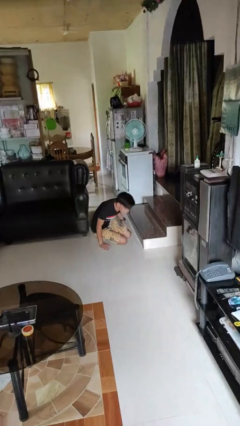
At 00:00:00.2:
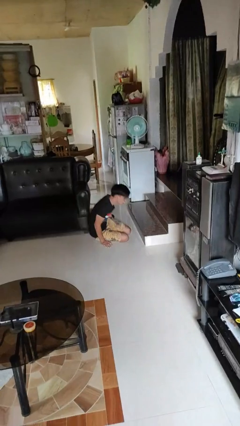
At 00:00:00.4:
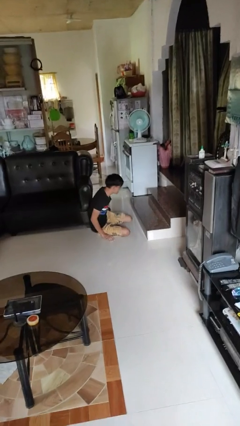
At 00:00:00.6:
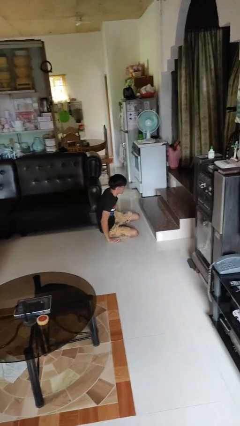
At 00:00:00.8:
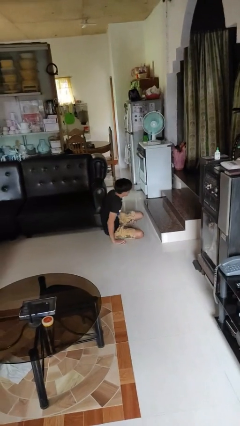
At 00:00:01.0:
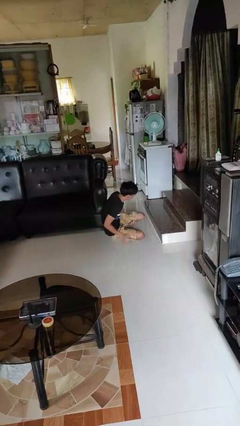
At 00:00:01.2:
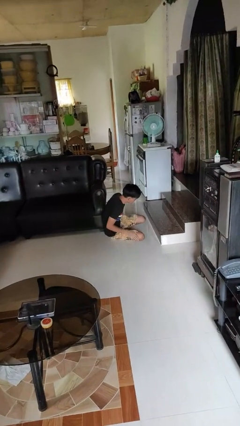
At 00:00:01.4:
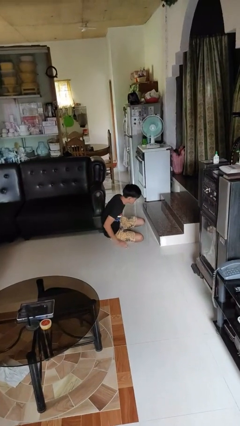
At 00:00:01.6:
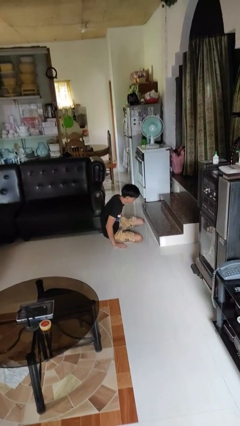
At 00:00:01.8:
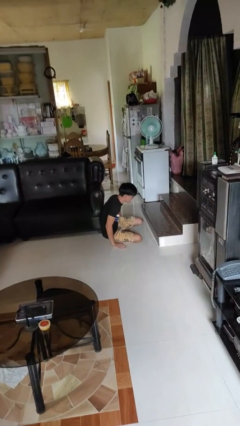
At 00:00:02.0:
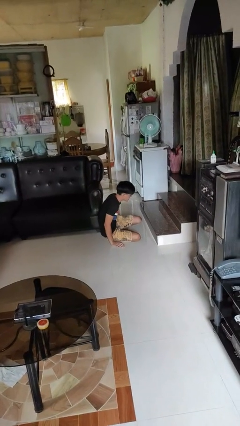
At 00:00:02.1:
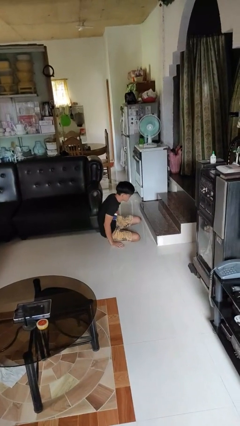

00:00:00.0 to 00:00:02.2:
person lies down on floor

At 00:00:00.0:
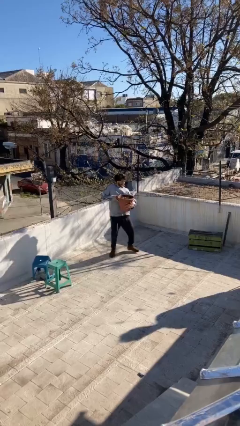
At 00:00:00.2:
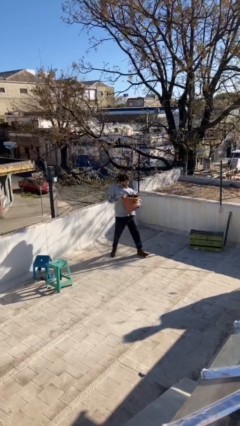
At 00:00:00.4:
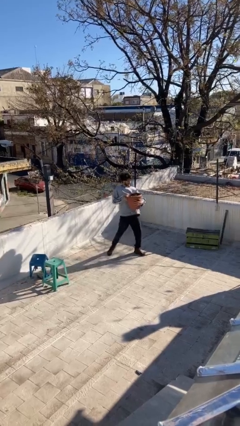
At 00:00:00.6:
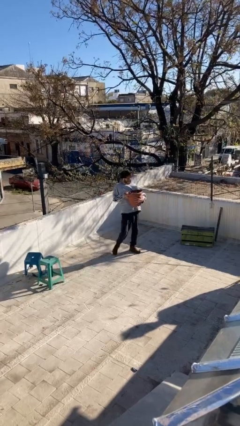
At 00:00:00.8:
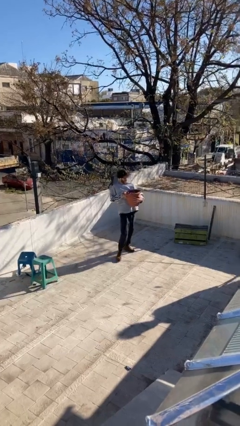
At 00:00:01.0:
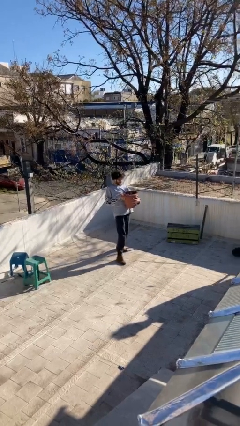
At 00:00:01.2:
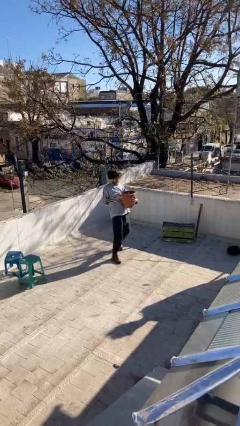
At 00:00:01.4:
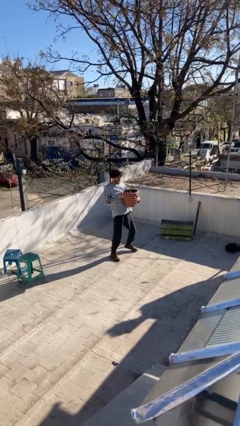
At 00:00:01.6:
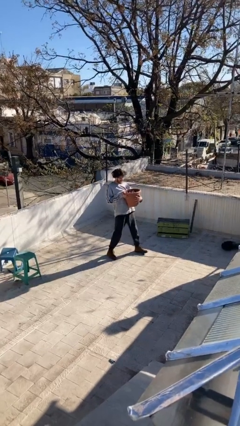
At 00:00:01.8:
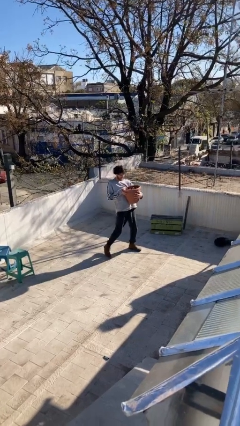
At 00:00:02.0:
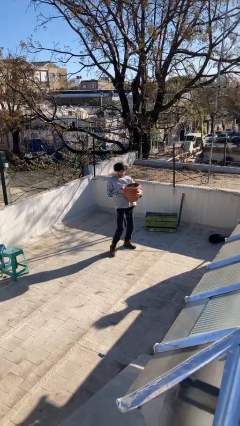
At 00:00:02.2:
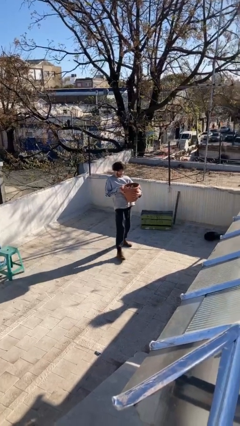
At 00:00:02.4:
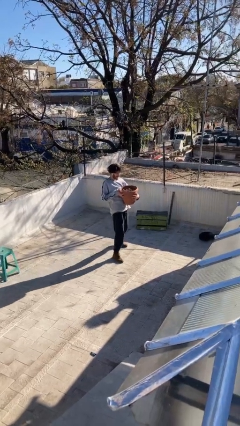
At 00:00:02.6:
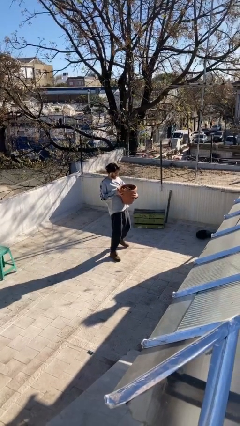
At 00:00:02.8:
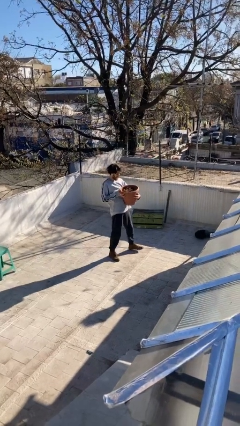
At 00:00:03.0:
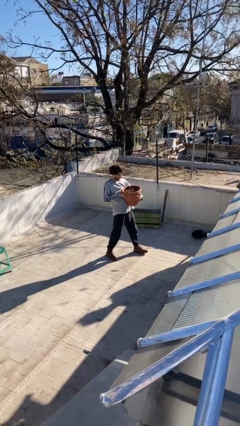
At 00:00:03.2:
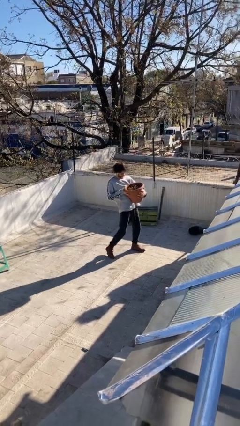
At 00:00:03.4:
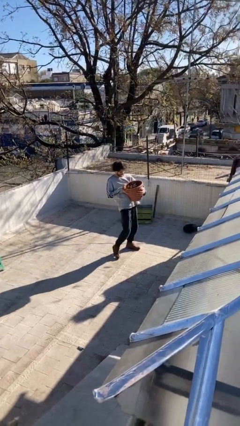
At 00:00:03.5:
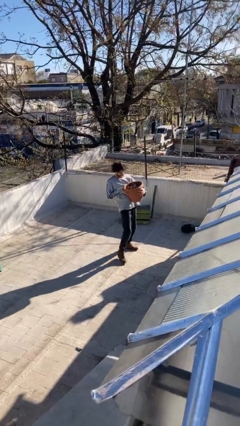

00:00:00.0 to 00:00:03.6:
person carries heavy object

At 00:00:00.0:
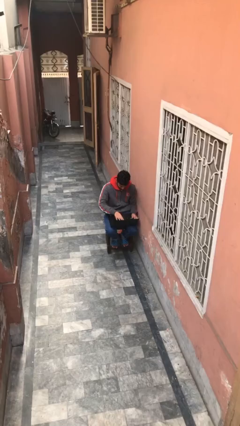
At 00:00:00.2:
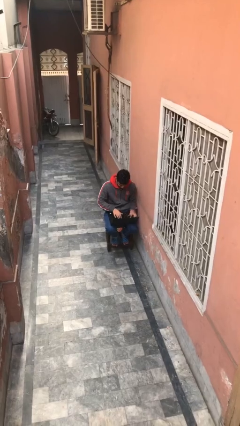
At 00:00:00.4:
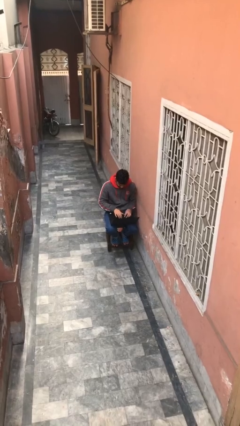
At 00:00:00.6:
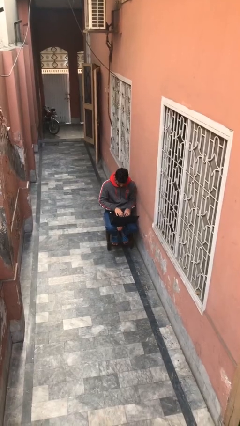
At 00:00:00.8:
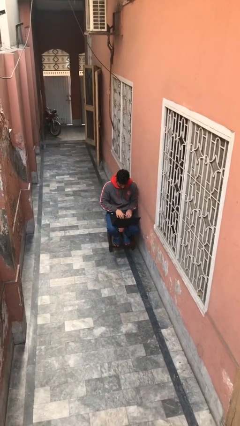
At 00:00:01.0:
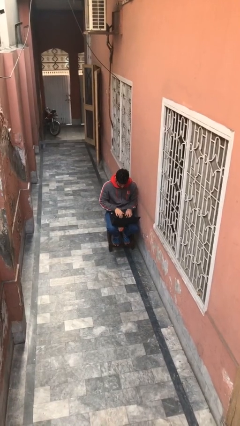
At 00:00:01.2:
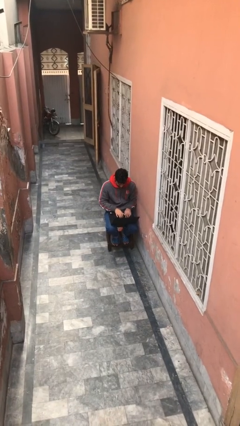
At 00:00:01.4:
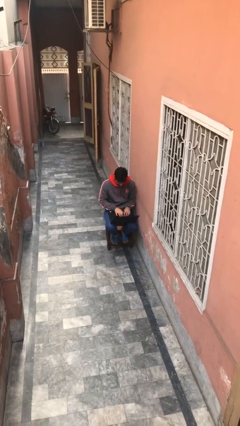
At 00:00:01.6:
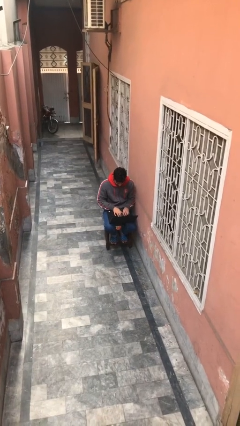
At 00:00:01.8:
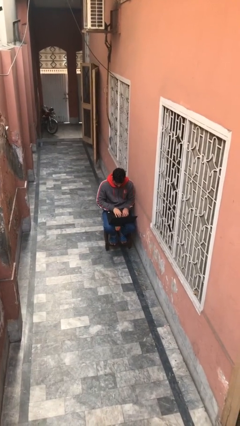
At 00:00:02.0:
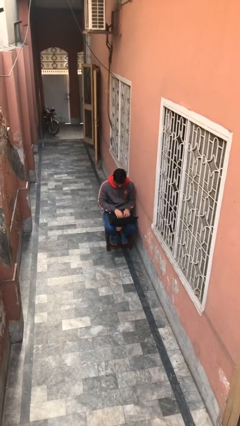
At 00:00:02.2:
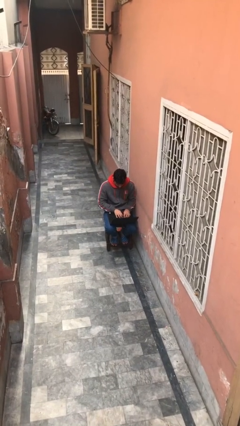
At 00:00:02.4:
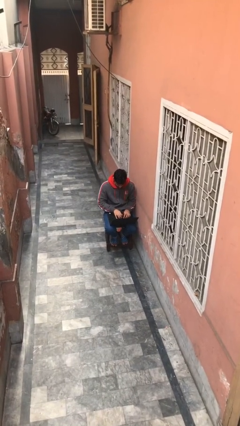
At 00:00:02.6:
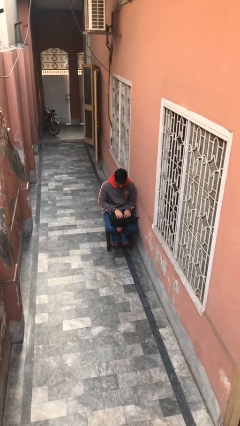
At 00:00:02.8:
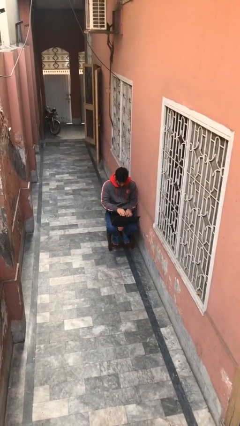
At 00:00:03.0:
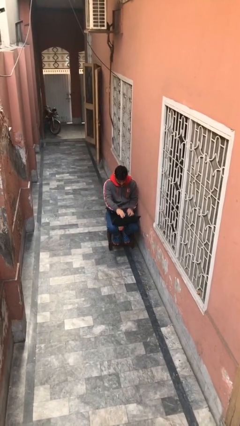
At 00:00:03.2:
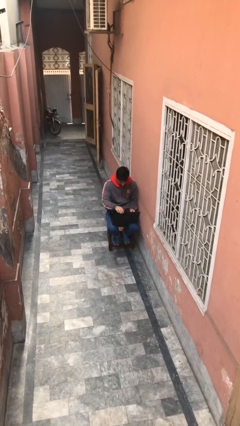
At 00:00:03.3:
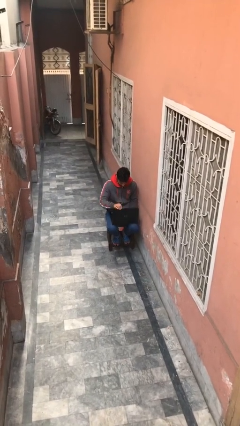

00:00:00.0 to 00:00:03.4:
person interacts with laptop

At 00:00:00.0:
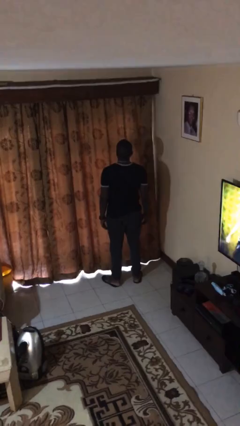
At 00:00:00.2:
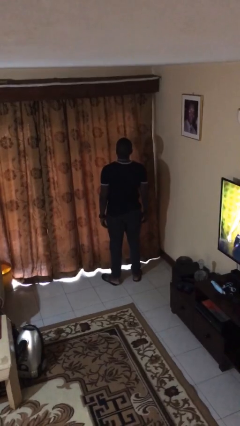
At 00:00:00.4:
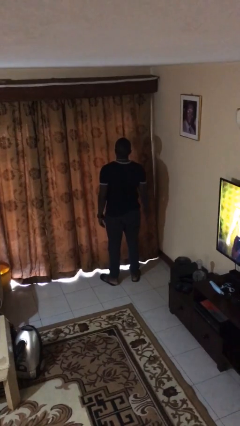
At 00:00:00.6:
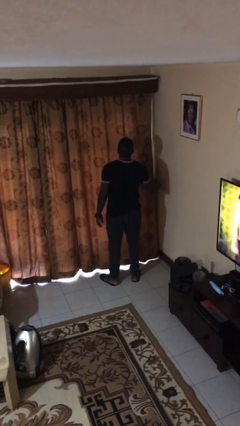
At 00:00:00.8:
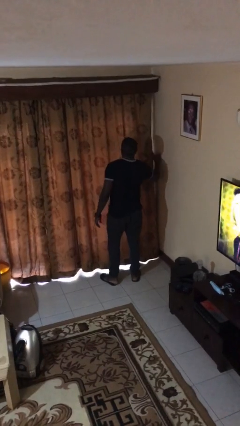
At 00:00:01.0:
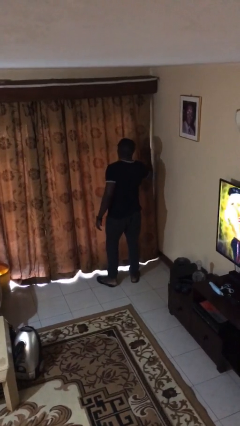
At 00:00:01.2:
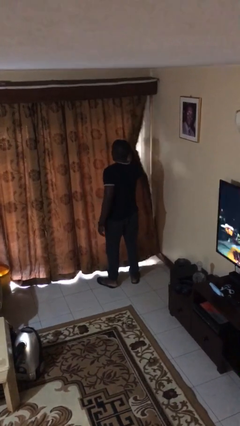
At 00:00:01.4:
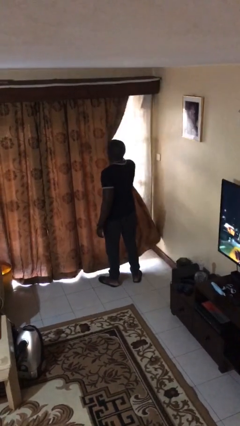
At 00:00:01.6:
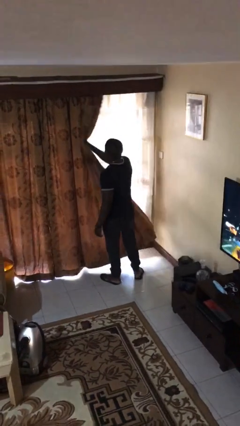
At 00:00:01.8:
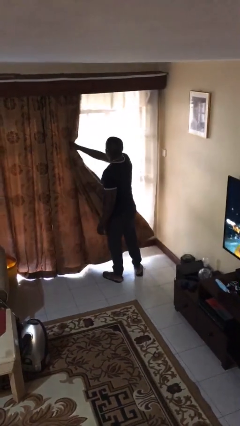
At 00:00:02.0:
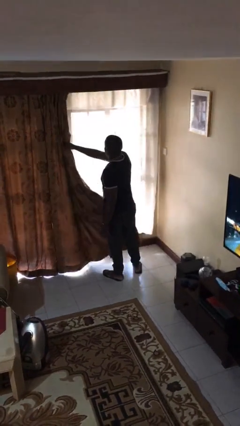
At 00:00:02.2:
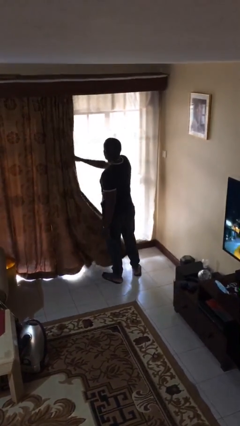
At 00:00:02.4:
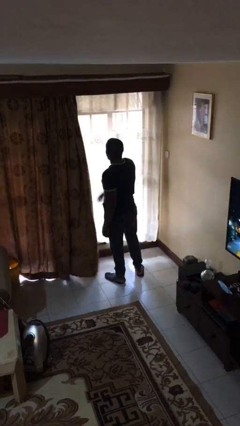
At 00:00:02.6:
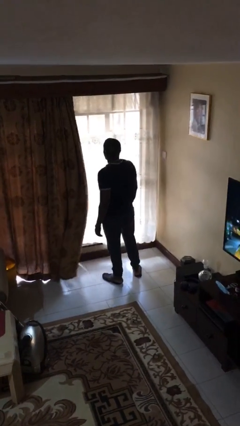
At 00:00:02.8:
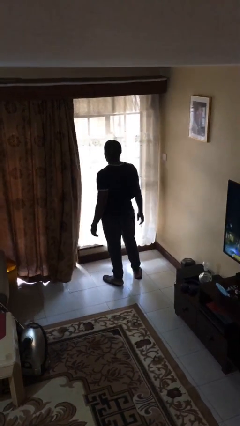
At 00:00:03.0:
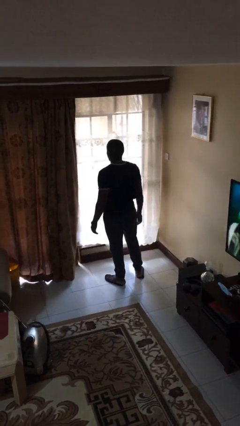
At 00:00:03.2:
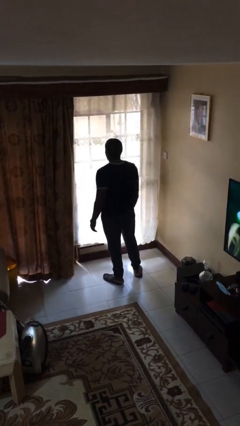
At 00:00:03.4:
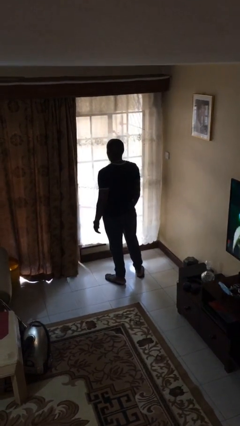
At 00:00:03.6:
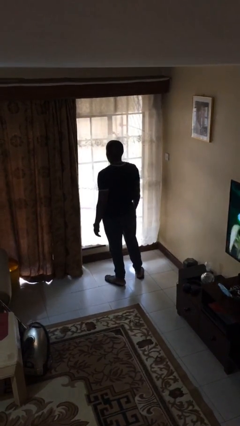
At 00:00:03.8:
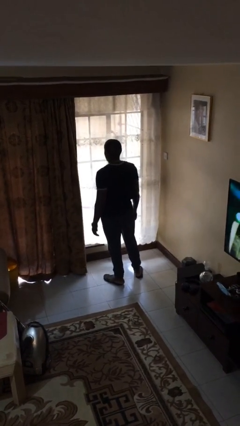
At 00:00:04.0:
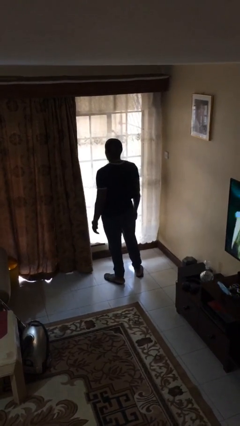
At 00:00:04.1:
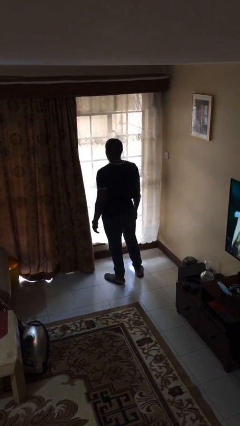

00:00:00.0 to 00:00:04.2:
person opens curtains

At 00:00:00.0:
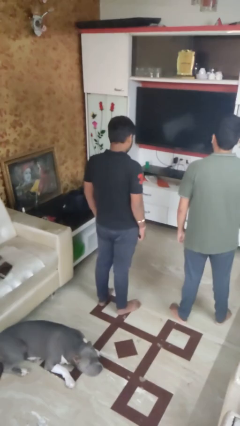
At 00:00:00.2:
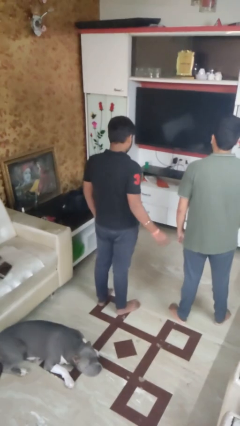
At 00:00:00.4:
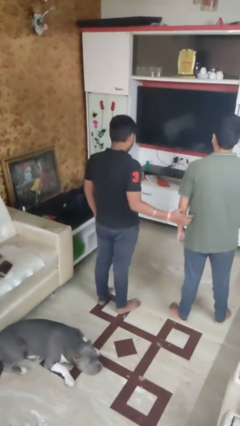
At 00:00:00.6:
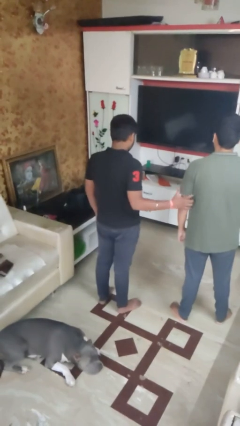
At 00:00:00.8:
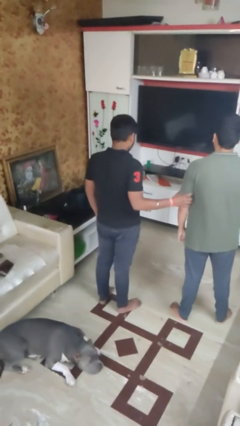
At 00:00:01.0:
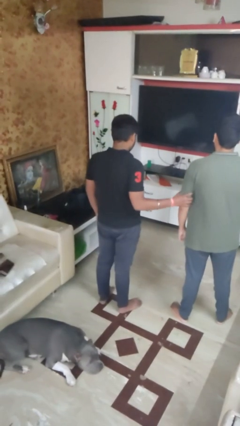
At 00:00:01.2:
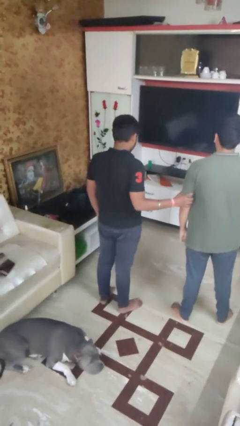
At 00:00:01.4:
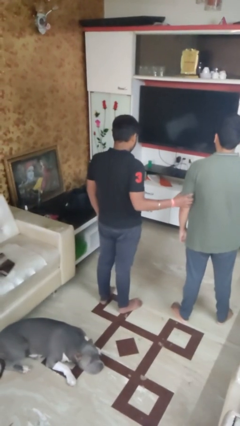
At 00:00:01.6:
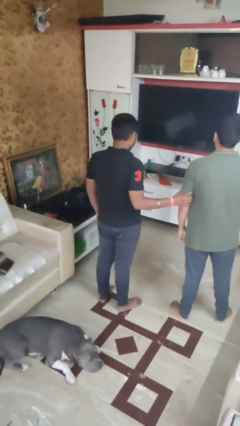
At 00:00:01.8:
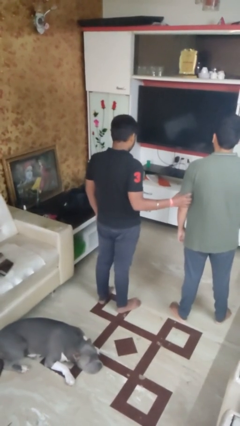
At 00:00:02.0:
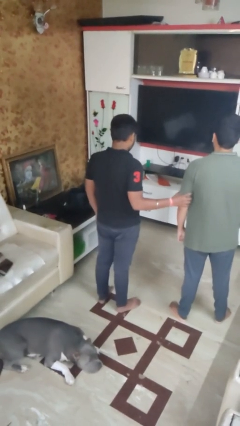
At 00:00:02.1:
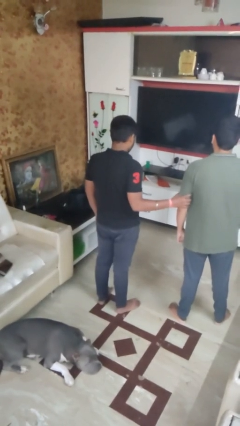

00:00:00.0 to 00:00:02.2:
person grabs person by bicep

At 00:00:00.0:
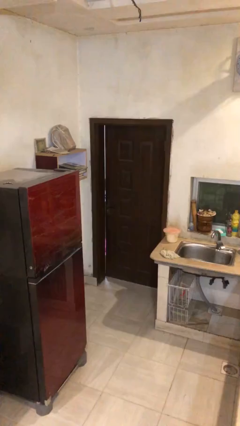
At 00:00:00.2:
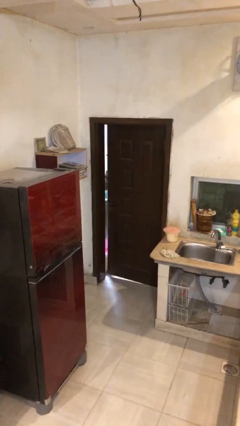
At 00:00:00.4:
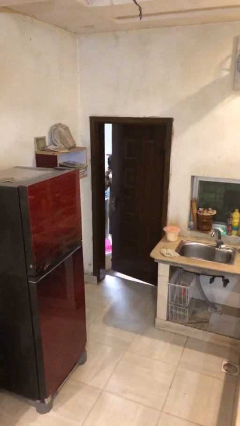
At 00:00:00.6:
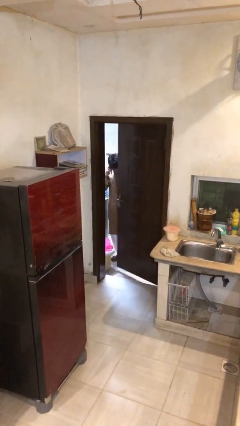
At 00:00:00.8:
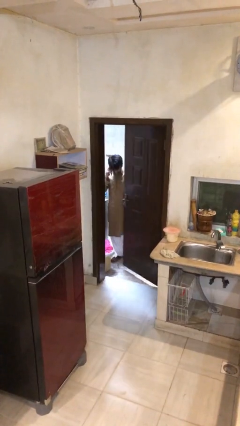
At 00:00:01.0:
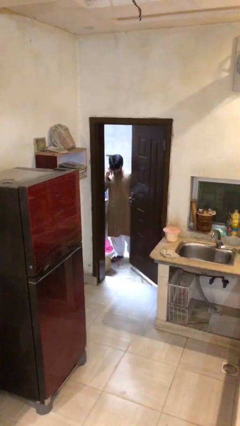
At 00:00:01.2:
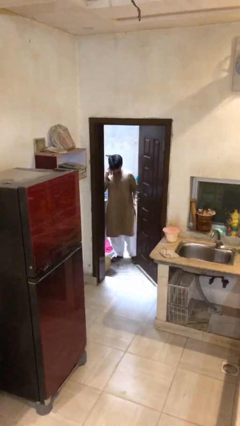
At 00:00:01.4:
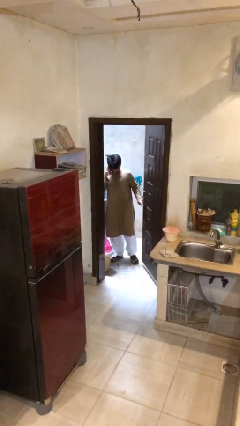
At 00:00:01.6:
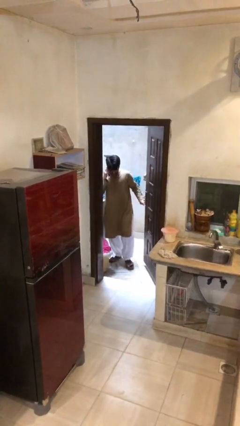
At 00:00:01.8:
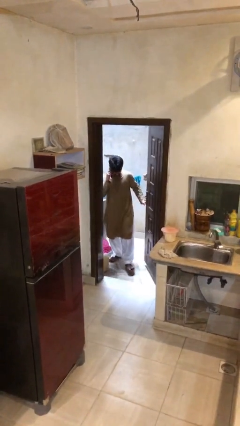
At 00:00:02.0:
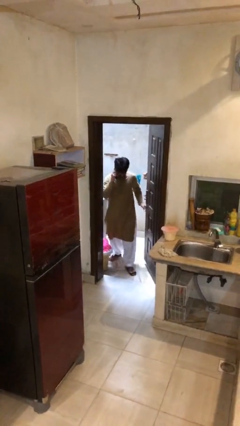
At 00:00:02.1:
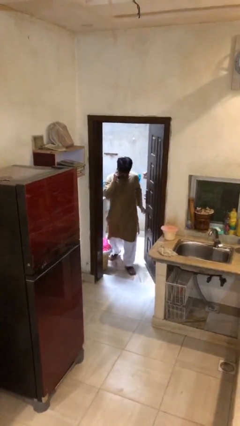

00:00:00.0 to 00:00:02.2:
person opens facility door
